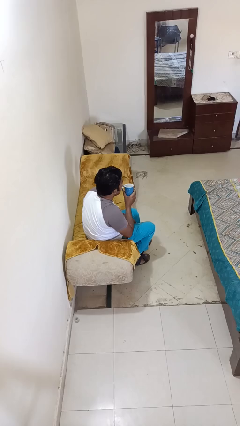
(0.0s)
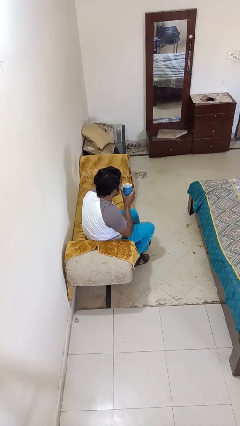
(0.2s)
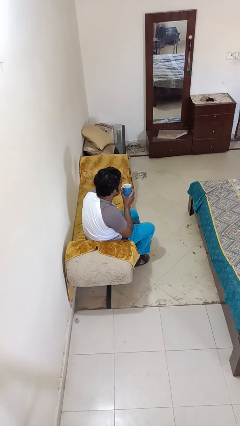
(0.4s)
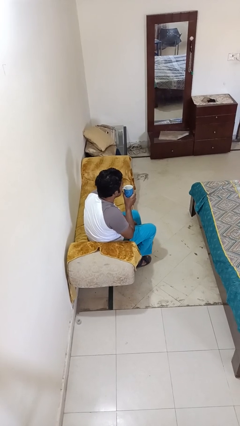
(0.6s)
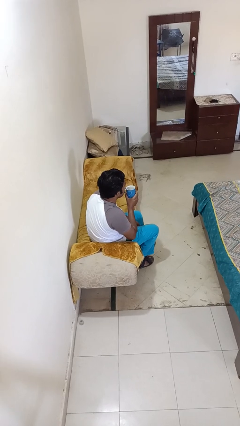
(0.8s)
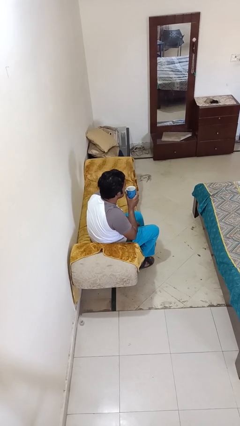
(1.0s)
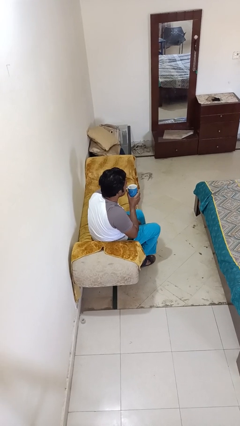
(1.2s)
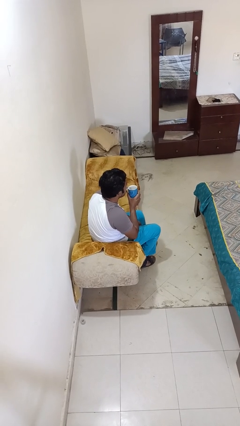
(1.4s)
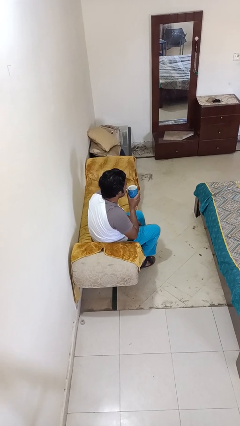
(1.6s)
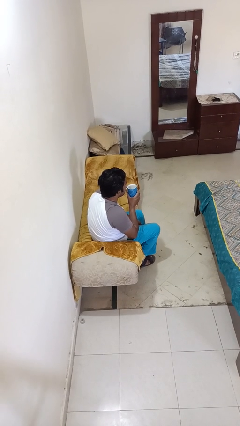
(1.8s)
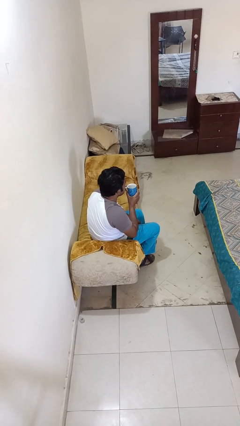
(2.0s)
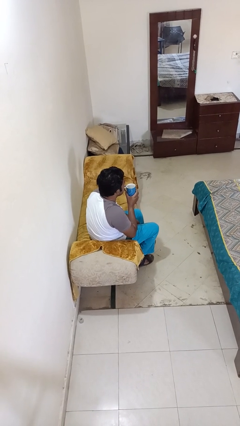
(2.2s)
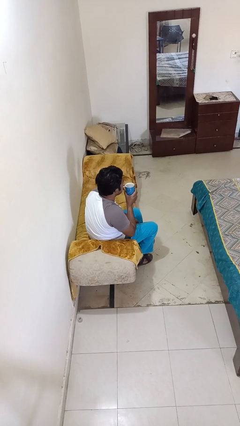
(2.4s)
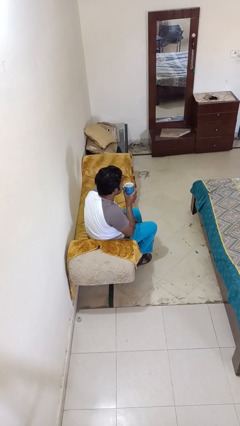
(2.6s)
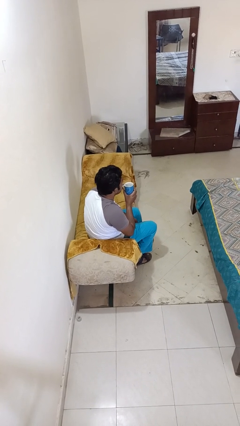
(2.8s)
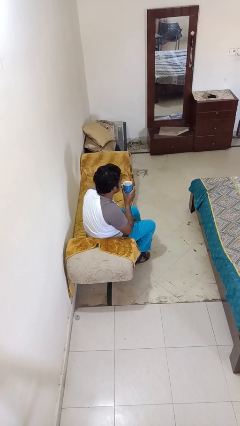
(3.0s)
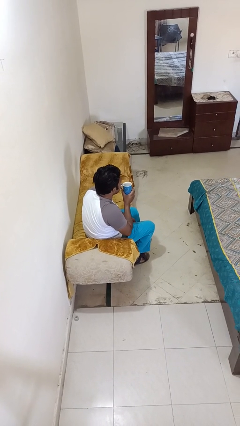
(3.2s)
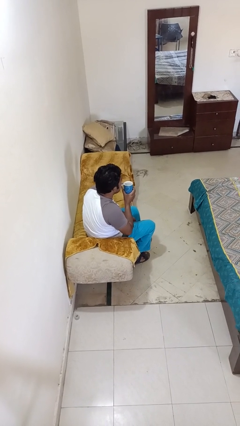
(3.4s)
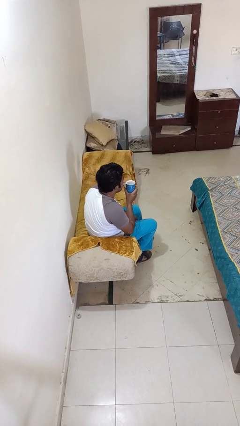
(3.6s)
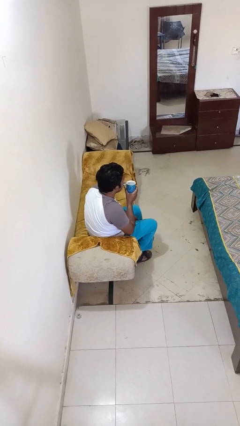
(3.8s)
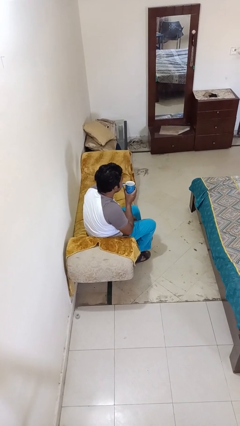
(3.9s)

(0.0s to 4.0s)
person drinks from straw

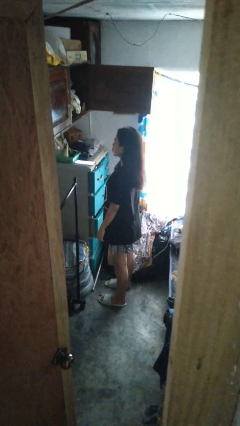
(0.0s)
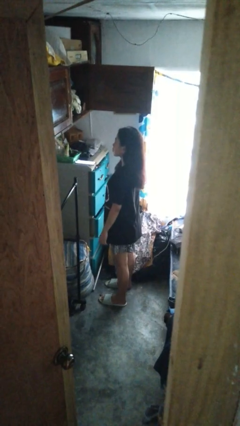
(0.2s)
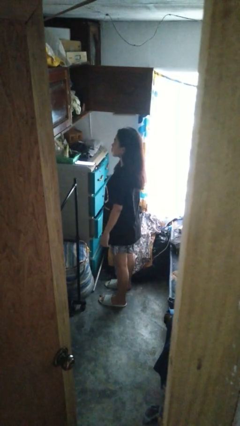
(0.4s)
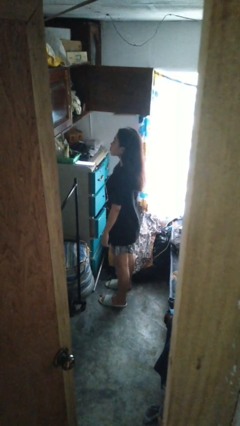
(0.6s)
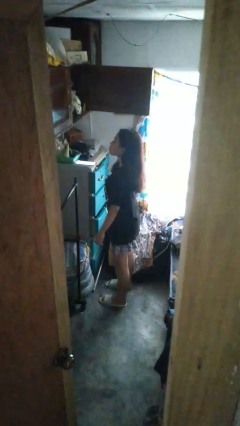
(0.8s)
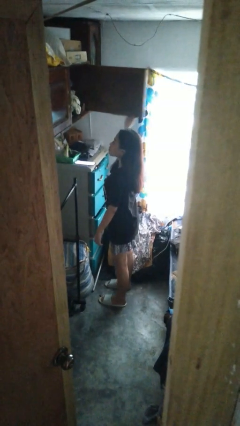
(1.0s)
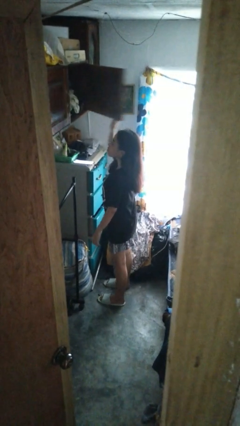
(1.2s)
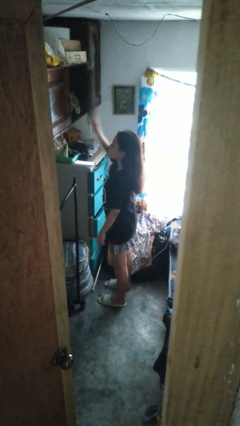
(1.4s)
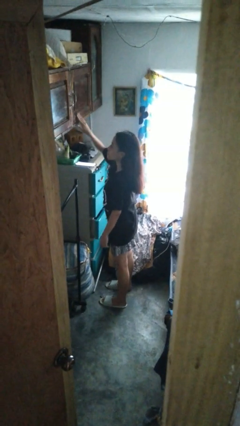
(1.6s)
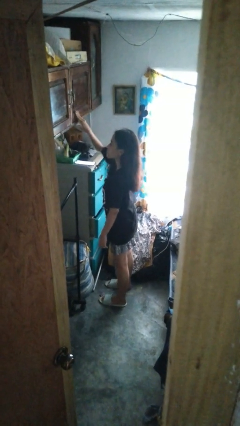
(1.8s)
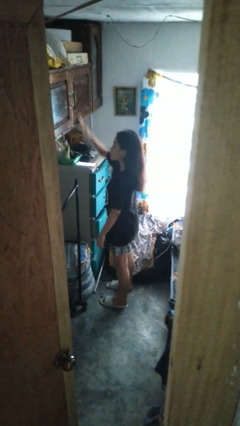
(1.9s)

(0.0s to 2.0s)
person closes closet door

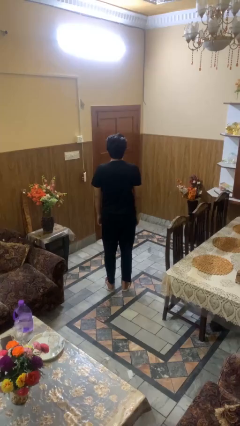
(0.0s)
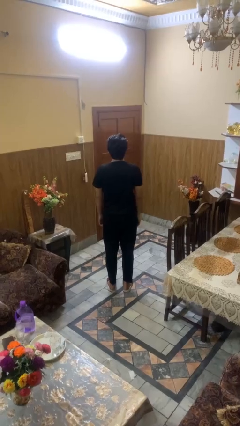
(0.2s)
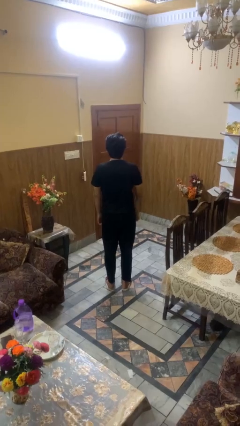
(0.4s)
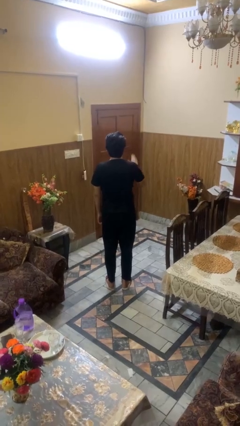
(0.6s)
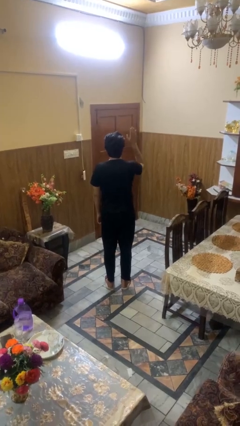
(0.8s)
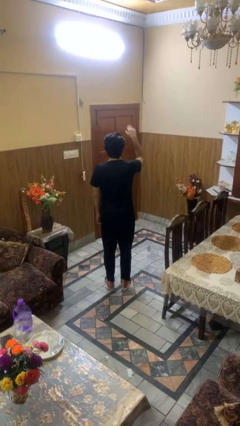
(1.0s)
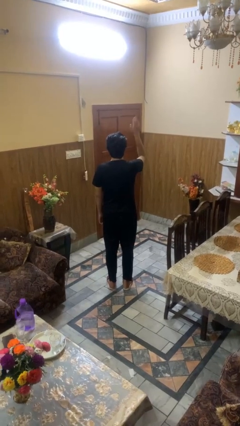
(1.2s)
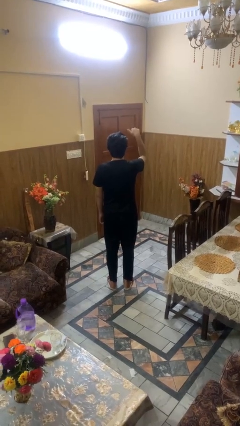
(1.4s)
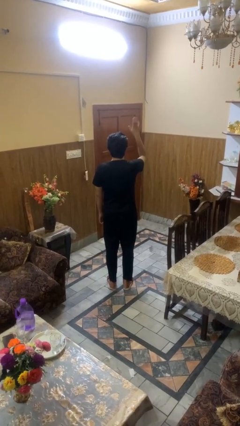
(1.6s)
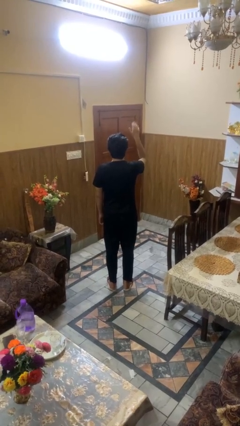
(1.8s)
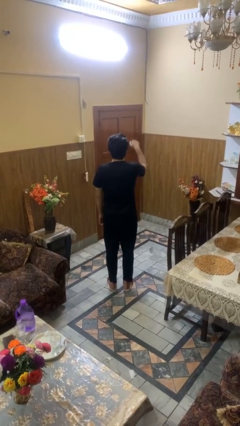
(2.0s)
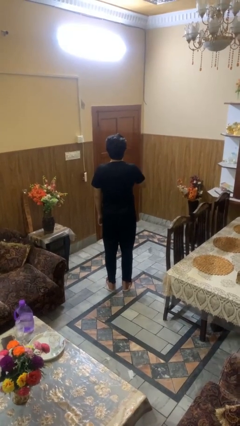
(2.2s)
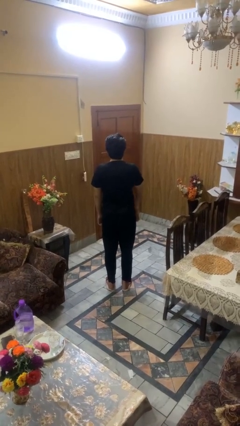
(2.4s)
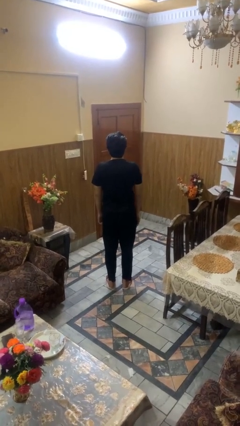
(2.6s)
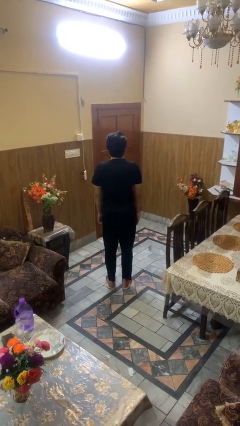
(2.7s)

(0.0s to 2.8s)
person gestures come here

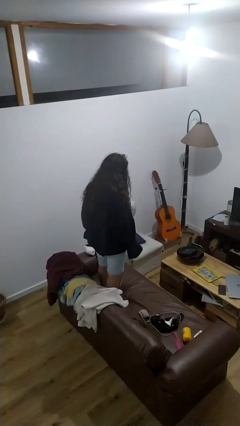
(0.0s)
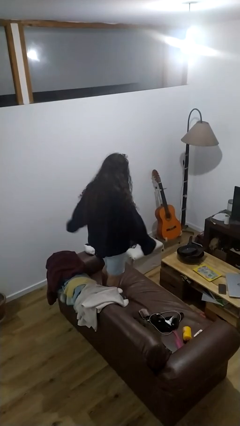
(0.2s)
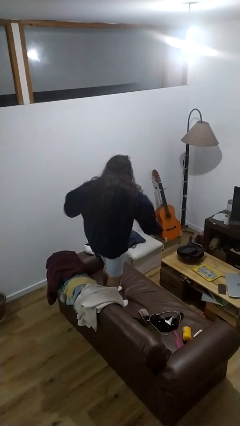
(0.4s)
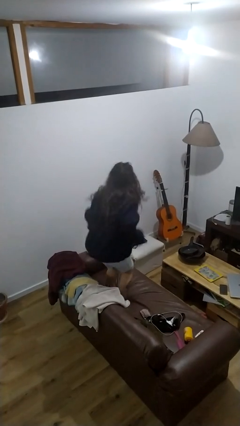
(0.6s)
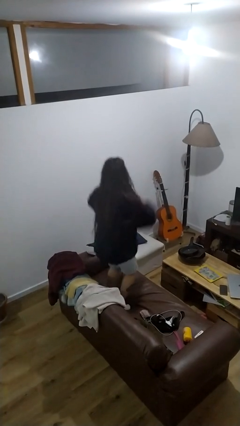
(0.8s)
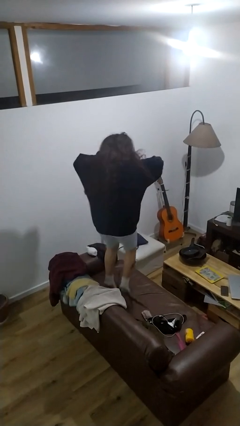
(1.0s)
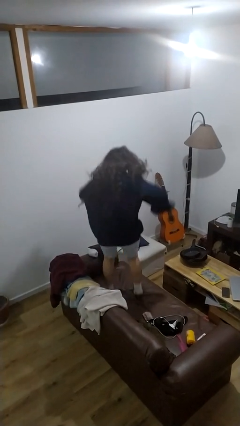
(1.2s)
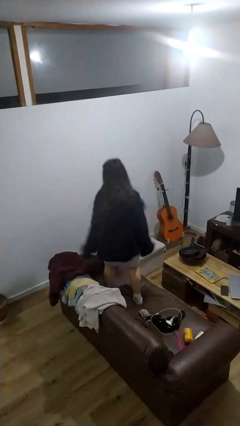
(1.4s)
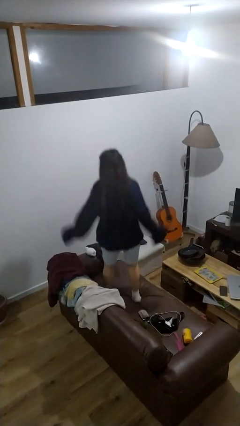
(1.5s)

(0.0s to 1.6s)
person jumps on couch

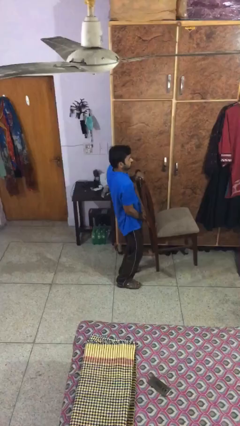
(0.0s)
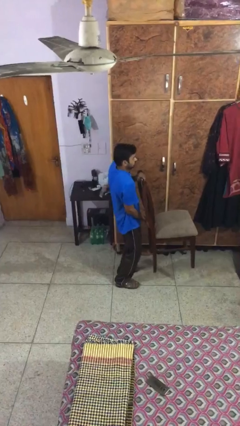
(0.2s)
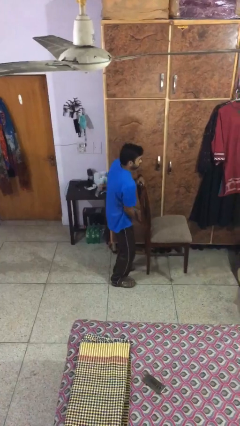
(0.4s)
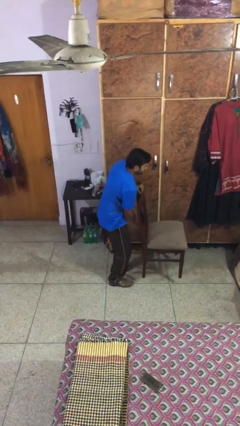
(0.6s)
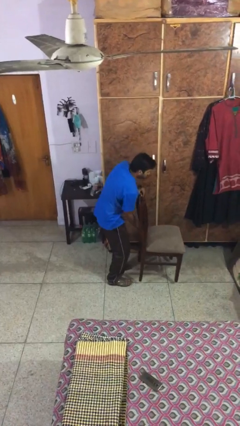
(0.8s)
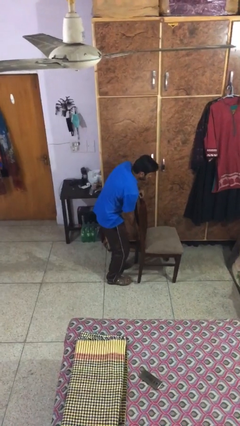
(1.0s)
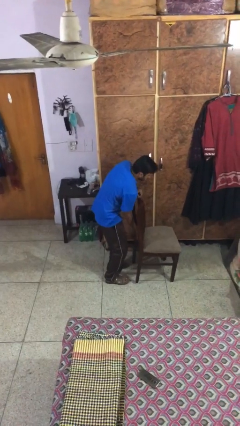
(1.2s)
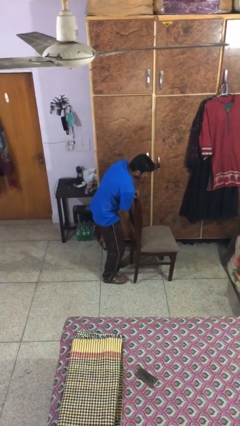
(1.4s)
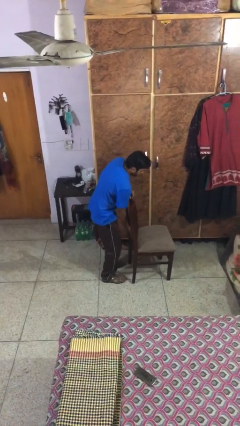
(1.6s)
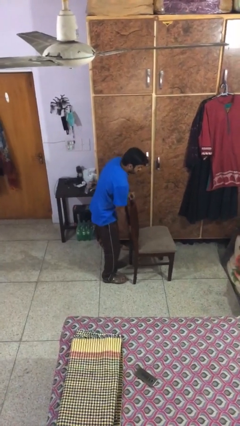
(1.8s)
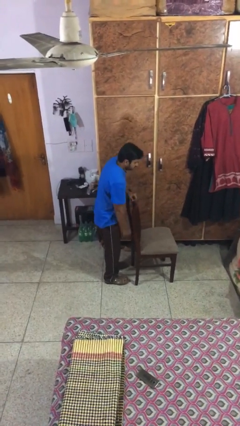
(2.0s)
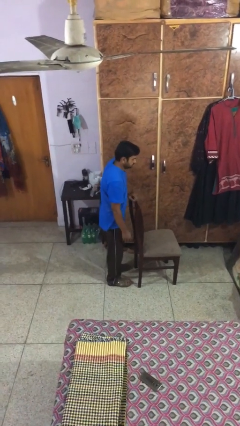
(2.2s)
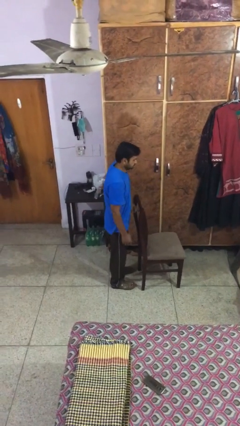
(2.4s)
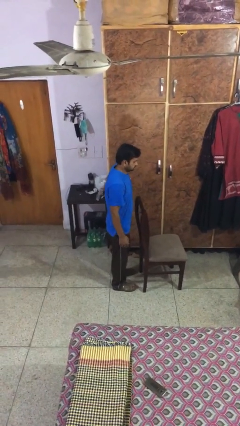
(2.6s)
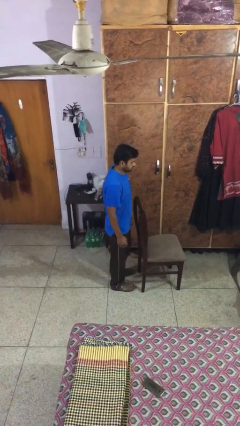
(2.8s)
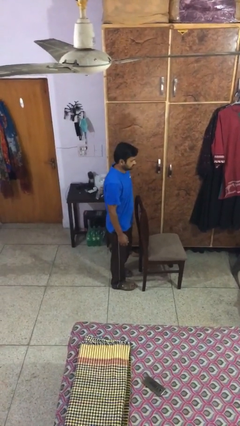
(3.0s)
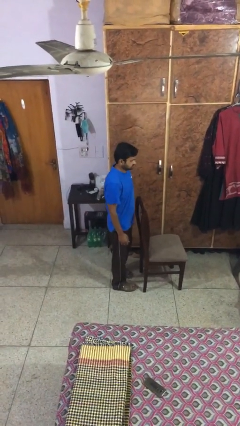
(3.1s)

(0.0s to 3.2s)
person puts down object on floor

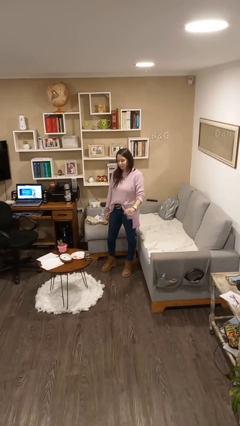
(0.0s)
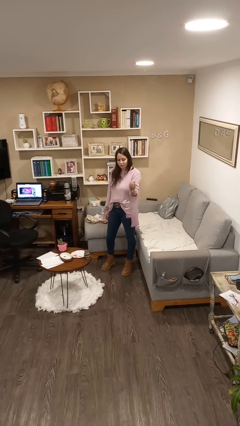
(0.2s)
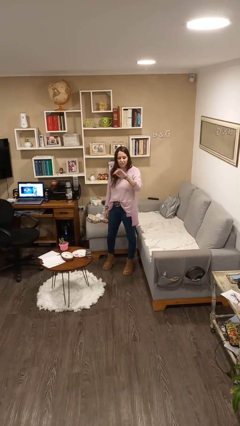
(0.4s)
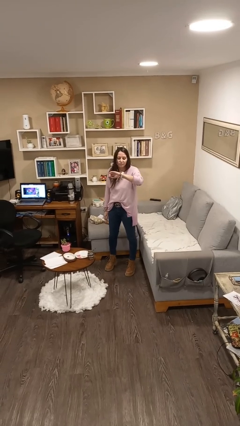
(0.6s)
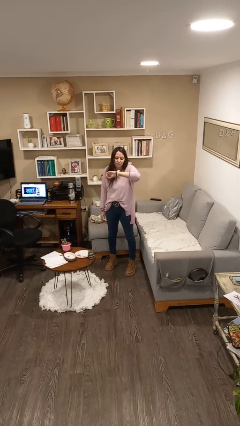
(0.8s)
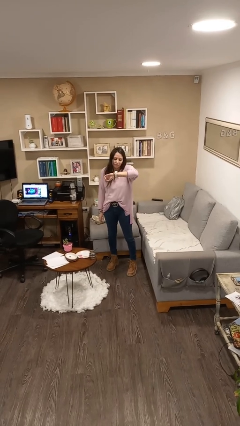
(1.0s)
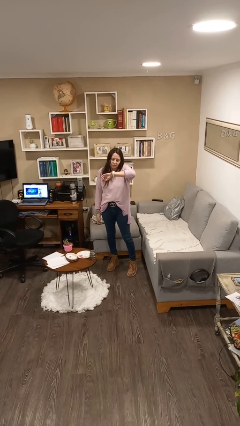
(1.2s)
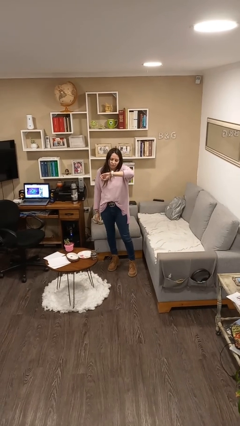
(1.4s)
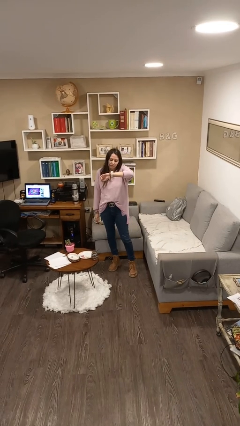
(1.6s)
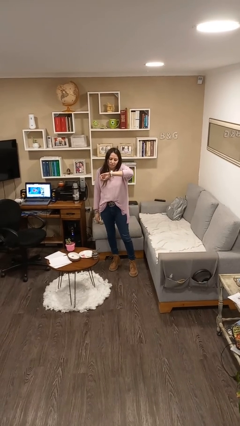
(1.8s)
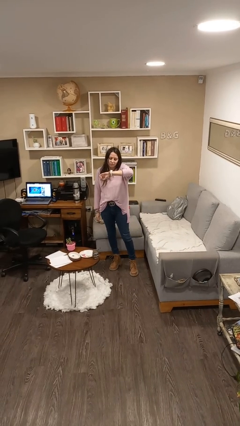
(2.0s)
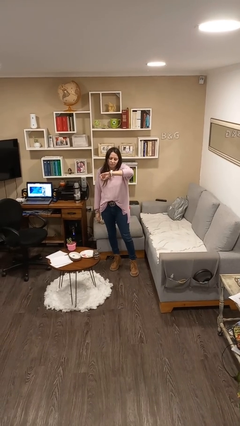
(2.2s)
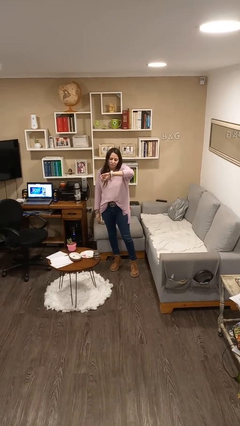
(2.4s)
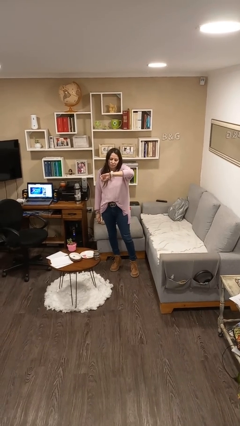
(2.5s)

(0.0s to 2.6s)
person looks at wristwatch

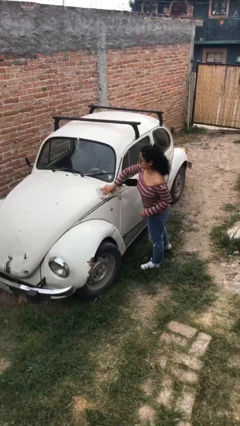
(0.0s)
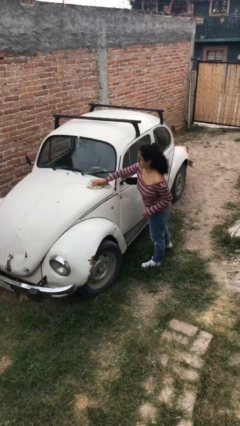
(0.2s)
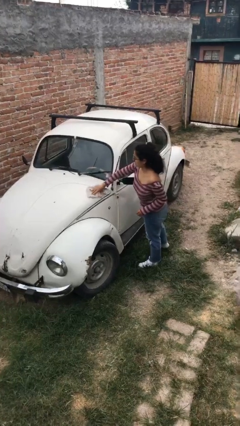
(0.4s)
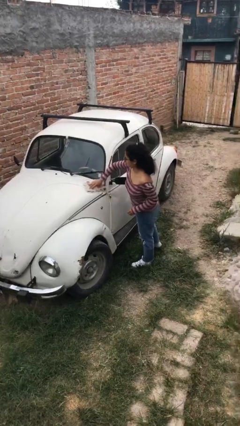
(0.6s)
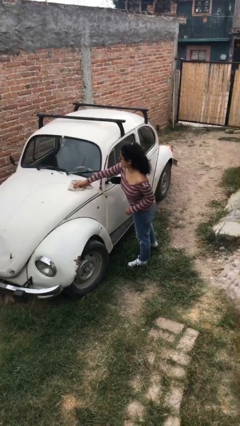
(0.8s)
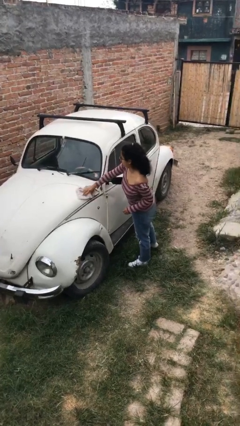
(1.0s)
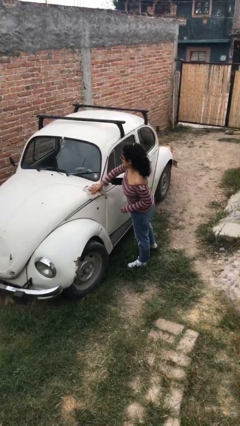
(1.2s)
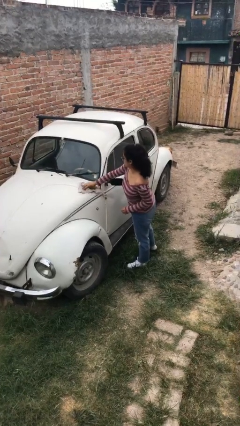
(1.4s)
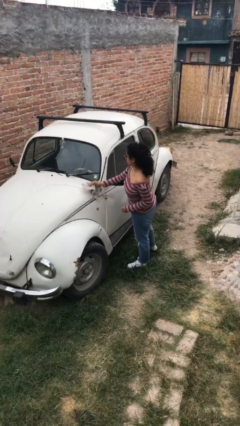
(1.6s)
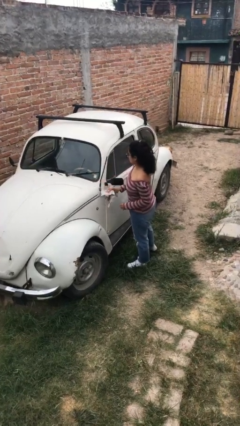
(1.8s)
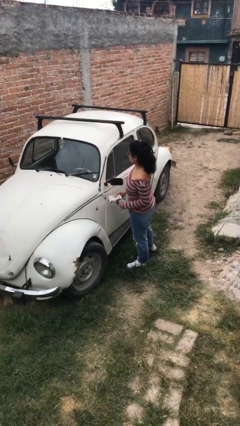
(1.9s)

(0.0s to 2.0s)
person polishes car with rag
